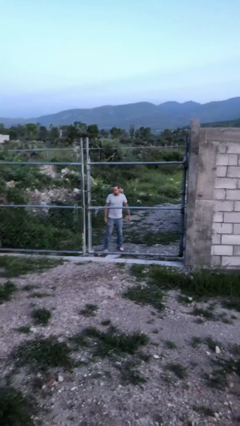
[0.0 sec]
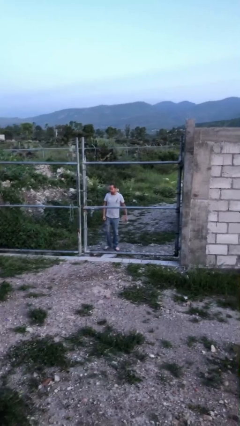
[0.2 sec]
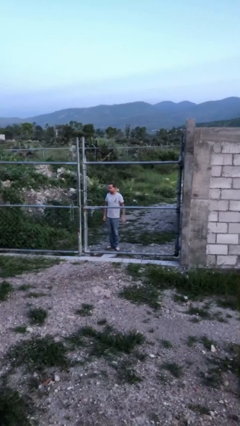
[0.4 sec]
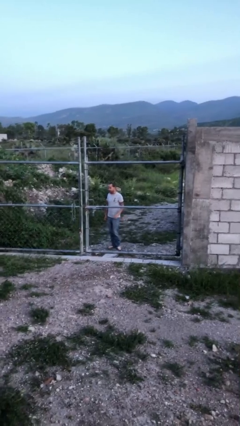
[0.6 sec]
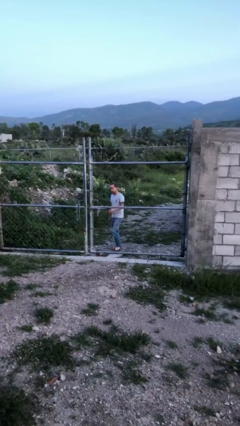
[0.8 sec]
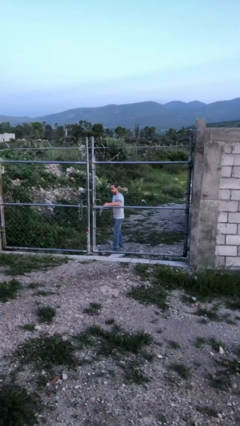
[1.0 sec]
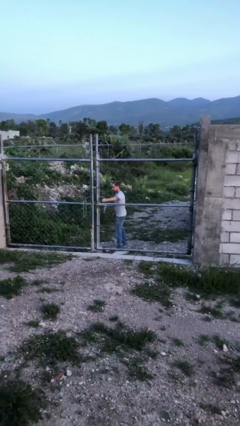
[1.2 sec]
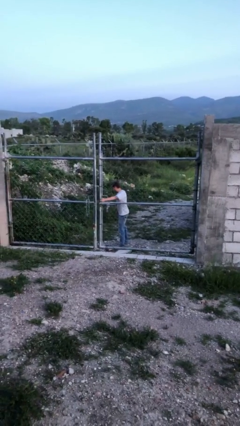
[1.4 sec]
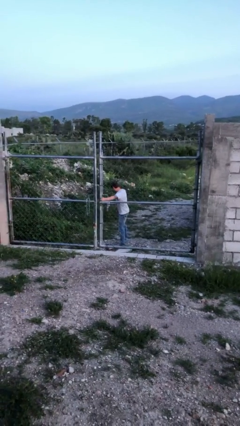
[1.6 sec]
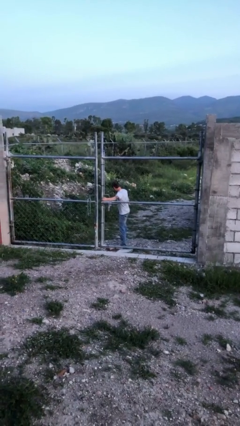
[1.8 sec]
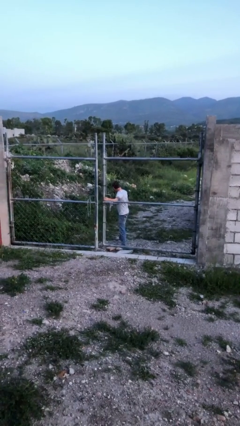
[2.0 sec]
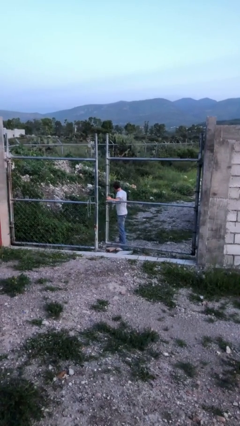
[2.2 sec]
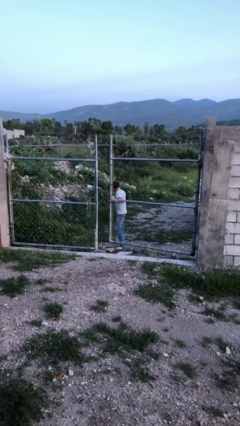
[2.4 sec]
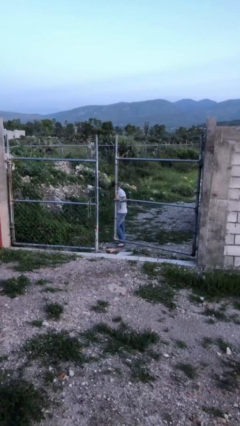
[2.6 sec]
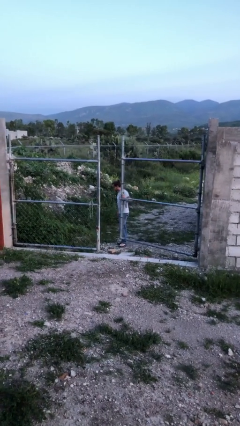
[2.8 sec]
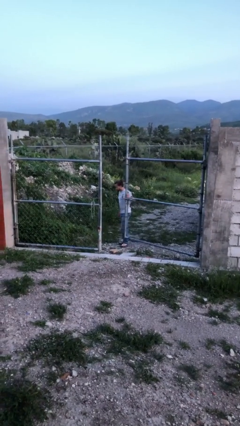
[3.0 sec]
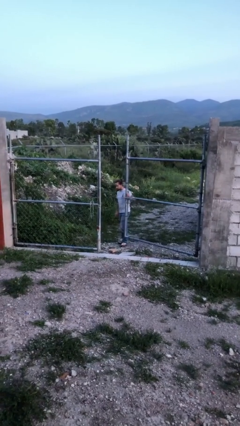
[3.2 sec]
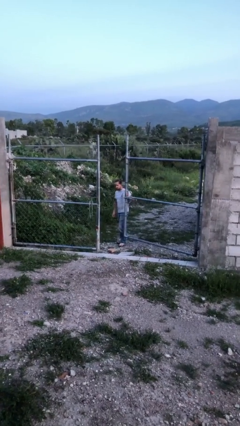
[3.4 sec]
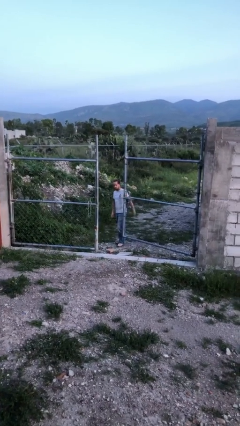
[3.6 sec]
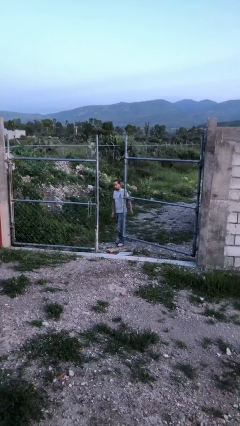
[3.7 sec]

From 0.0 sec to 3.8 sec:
person opens gate

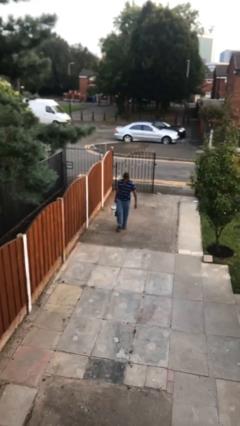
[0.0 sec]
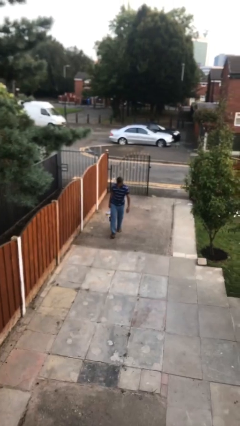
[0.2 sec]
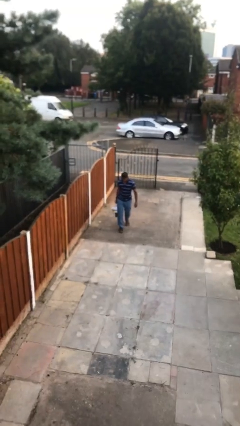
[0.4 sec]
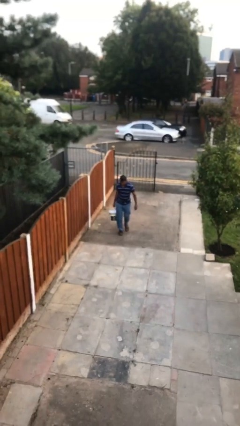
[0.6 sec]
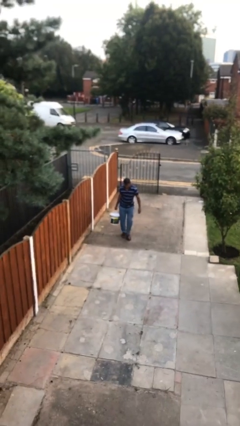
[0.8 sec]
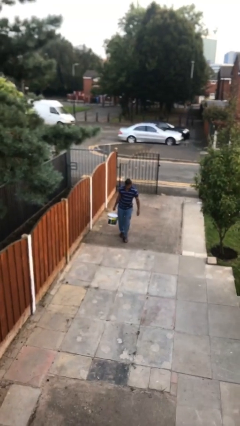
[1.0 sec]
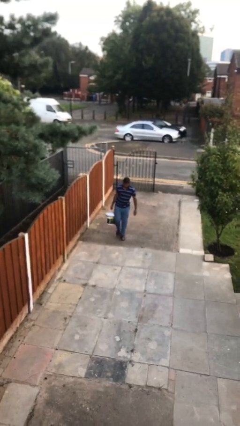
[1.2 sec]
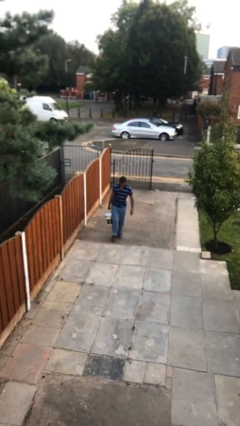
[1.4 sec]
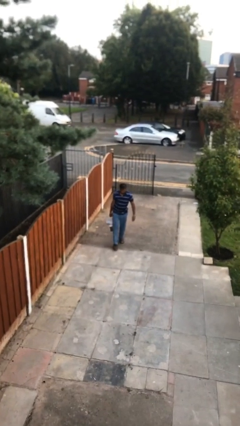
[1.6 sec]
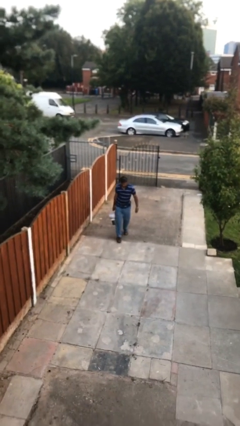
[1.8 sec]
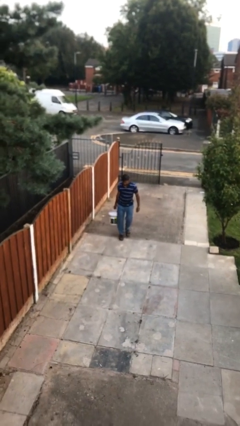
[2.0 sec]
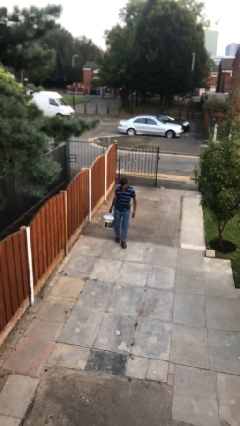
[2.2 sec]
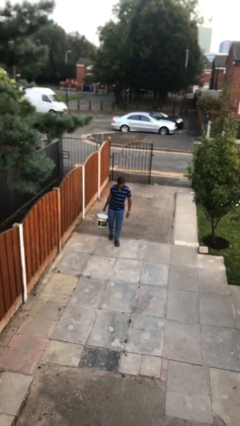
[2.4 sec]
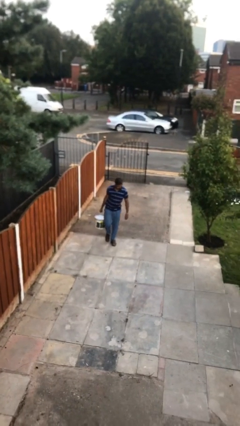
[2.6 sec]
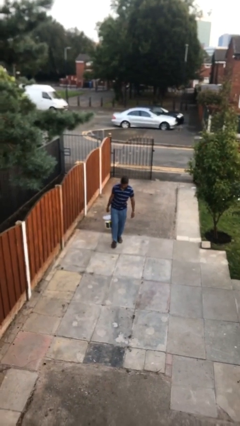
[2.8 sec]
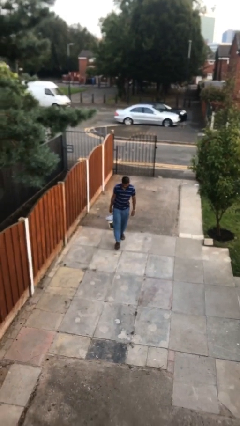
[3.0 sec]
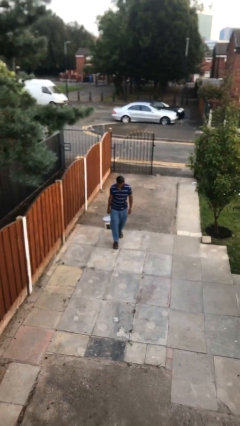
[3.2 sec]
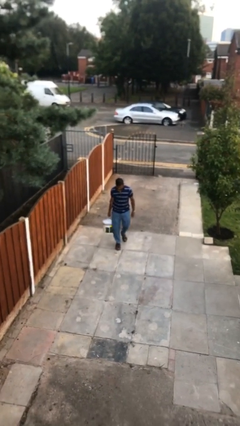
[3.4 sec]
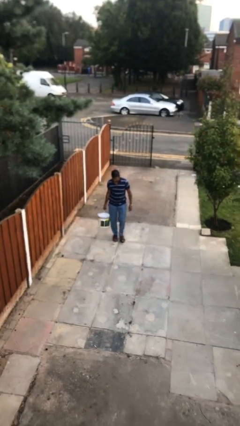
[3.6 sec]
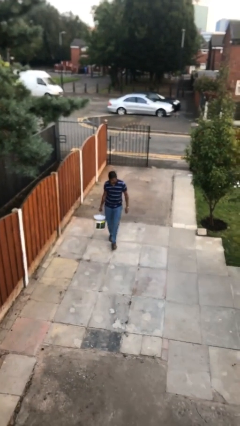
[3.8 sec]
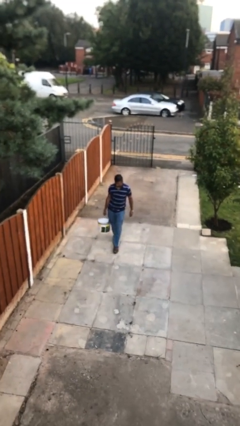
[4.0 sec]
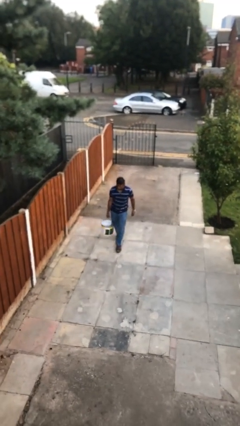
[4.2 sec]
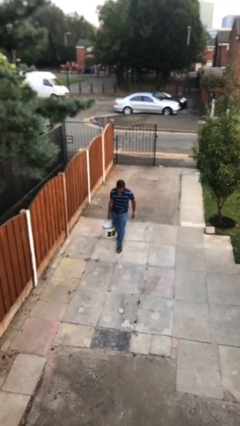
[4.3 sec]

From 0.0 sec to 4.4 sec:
person carries heavy object

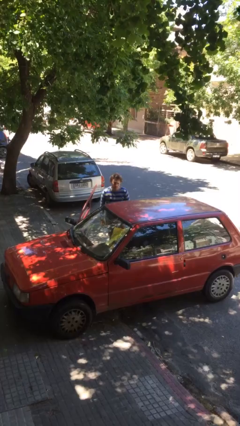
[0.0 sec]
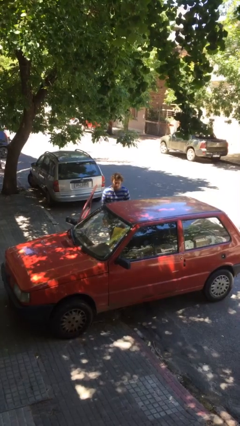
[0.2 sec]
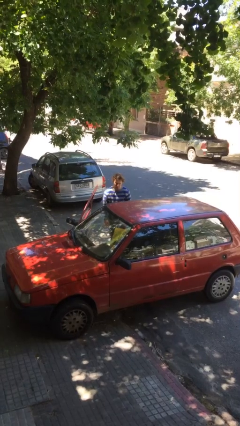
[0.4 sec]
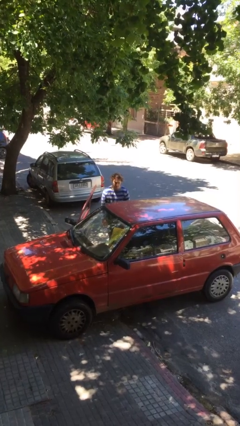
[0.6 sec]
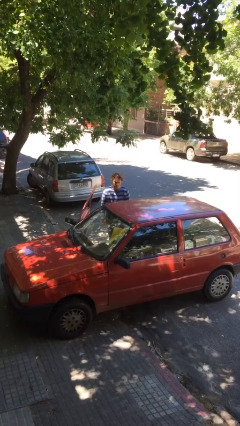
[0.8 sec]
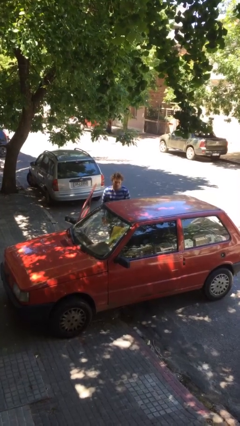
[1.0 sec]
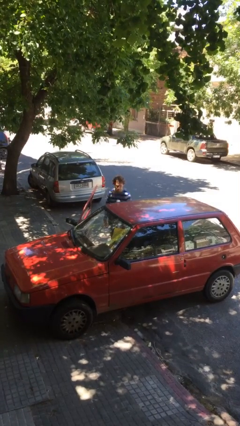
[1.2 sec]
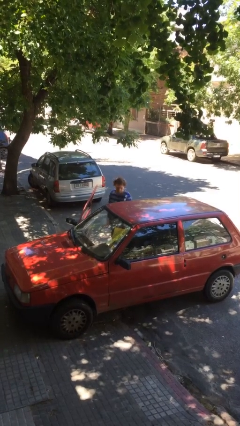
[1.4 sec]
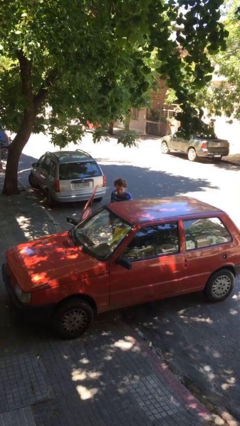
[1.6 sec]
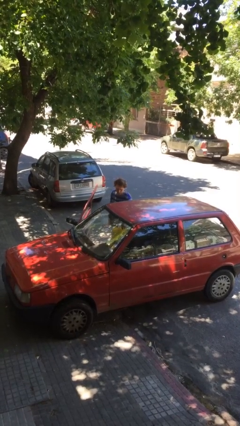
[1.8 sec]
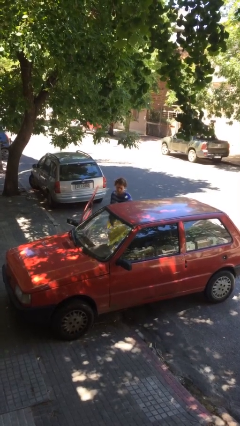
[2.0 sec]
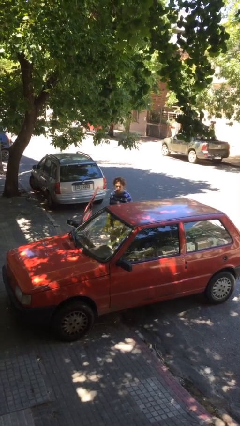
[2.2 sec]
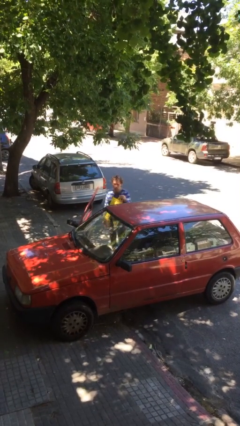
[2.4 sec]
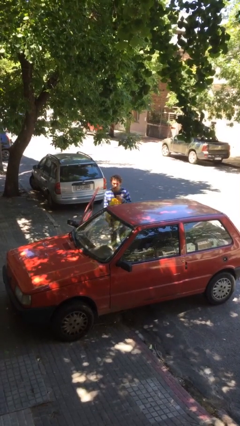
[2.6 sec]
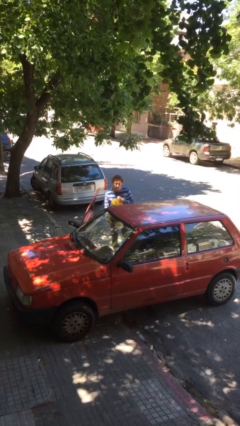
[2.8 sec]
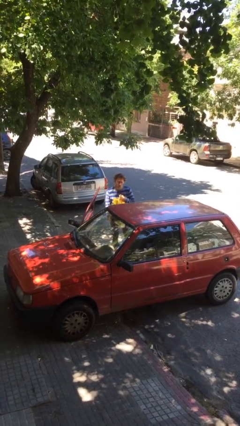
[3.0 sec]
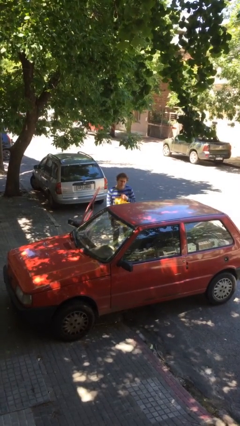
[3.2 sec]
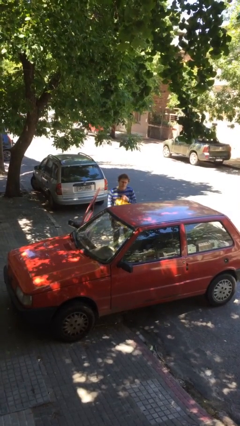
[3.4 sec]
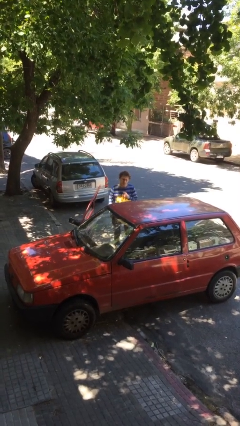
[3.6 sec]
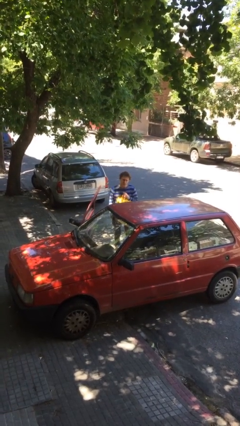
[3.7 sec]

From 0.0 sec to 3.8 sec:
person unloads car

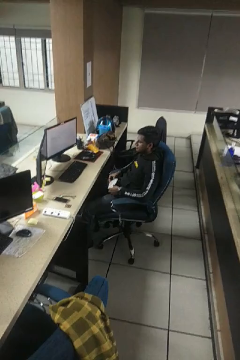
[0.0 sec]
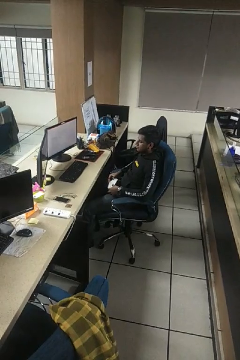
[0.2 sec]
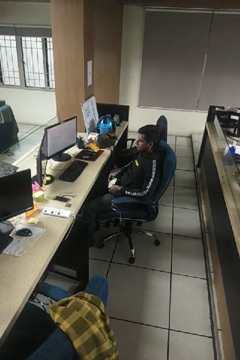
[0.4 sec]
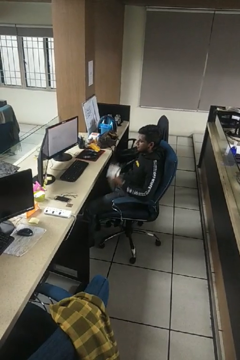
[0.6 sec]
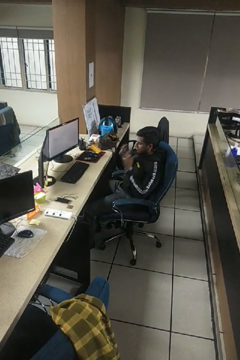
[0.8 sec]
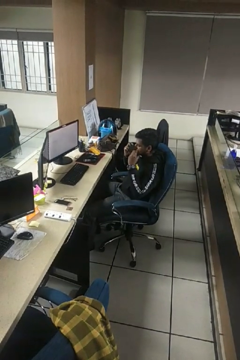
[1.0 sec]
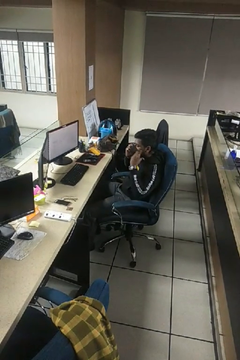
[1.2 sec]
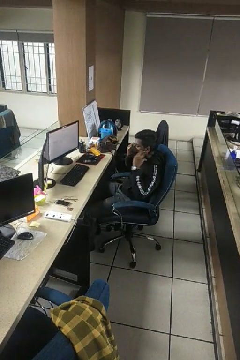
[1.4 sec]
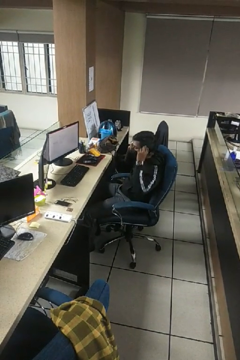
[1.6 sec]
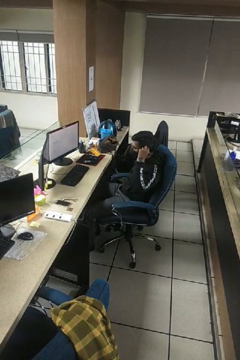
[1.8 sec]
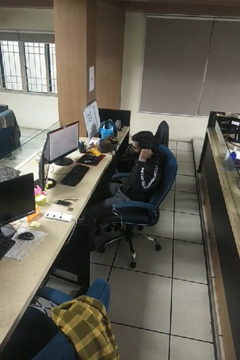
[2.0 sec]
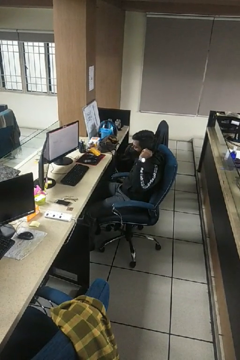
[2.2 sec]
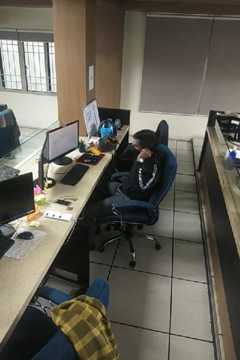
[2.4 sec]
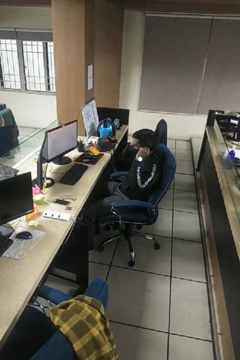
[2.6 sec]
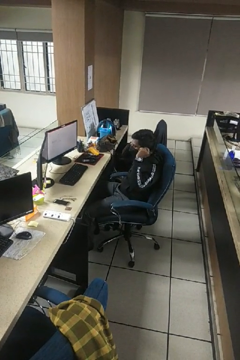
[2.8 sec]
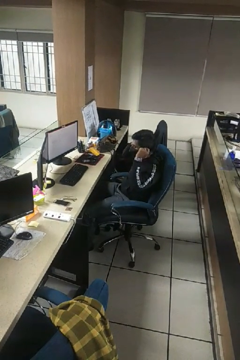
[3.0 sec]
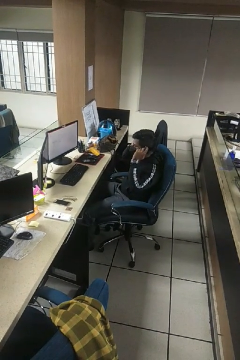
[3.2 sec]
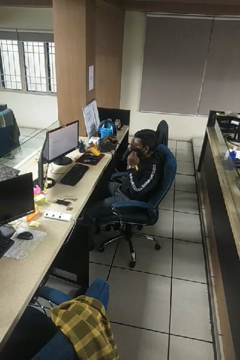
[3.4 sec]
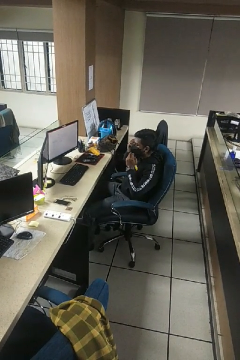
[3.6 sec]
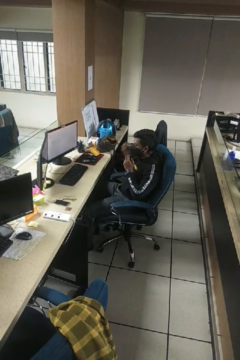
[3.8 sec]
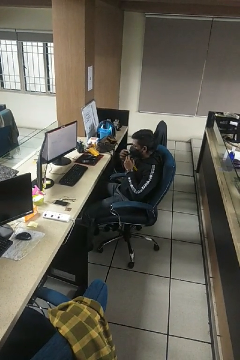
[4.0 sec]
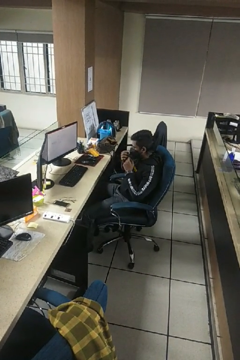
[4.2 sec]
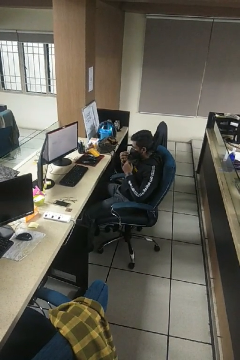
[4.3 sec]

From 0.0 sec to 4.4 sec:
person puts on facemask

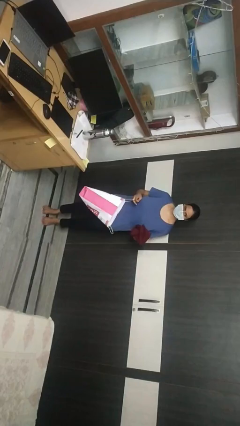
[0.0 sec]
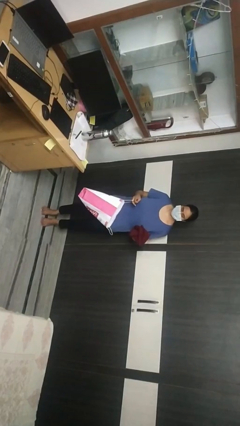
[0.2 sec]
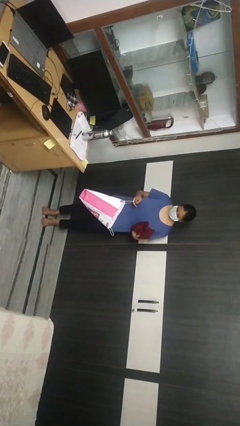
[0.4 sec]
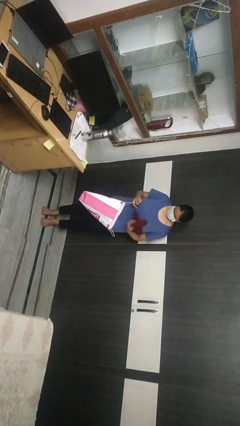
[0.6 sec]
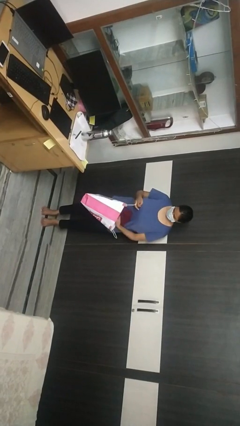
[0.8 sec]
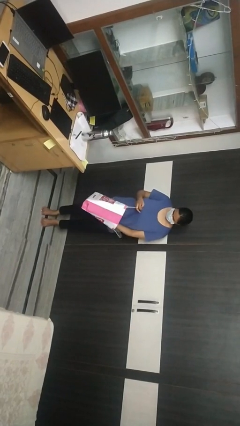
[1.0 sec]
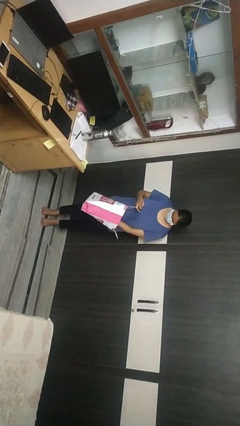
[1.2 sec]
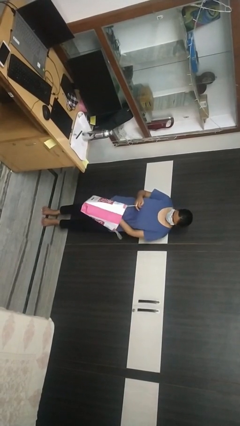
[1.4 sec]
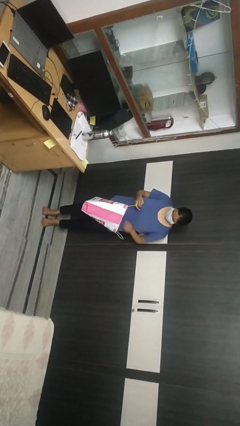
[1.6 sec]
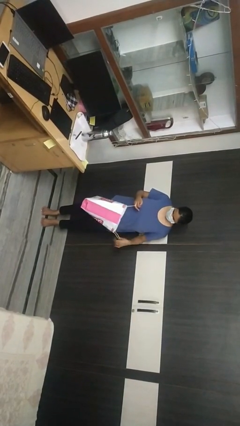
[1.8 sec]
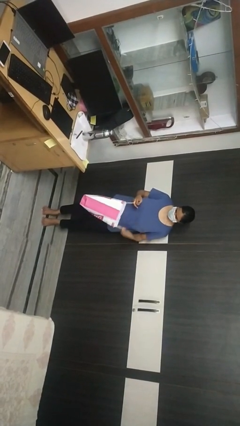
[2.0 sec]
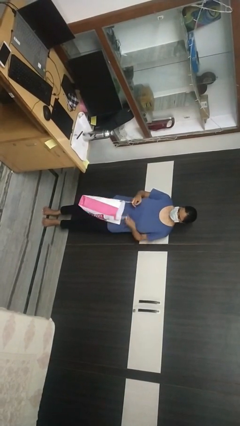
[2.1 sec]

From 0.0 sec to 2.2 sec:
person puts object into bag
